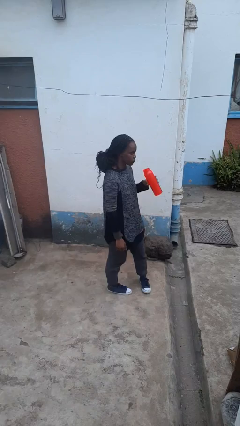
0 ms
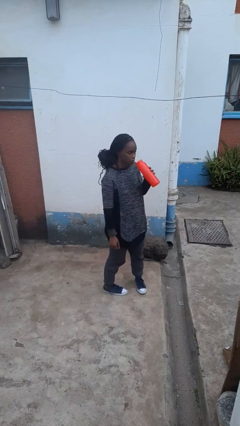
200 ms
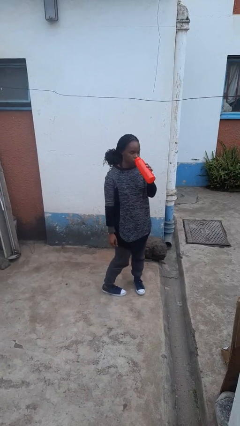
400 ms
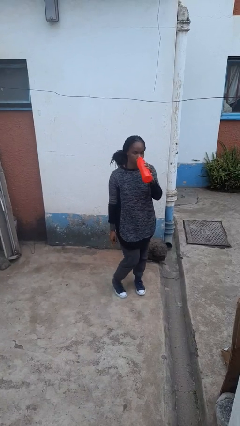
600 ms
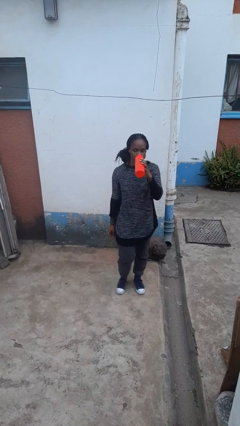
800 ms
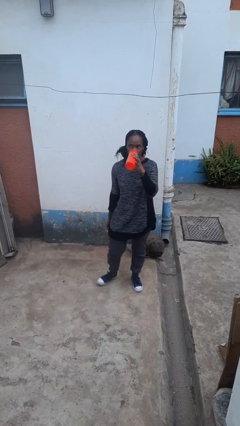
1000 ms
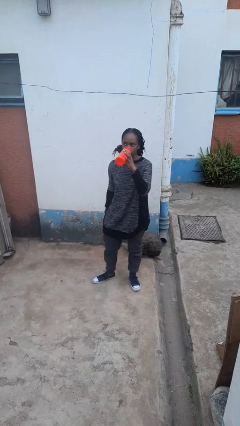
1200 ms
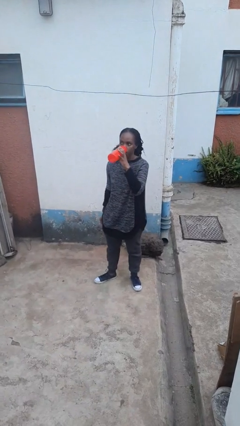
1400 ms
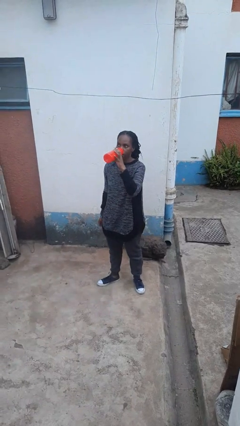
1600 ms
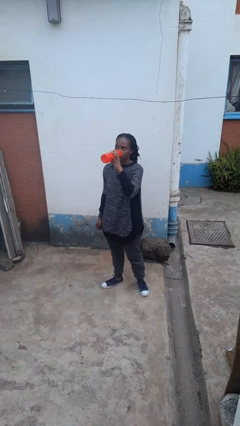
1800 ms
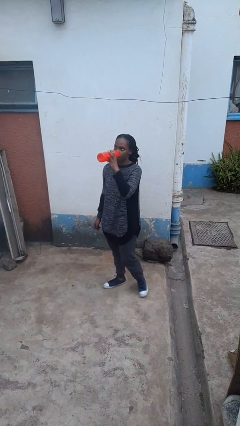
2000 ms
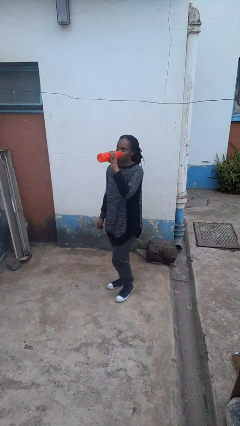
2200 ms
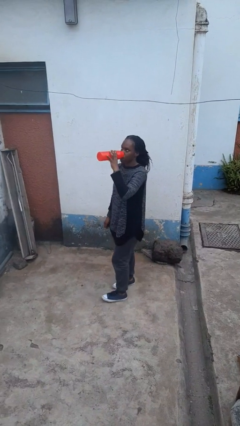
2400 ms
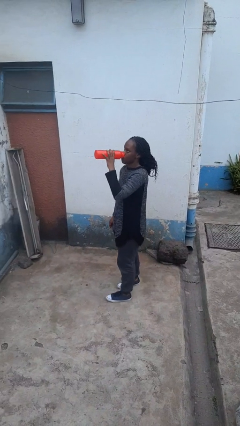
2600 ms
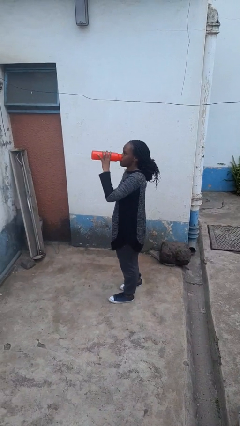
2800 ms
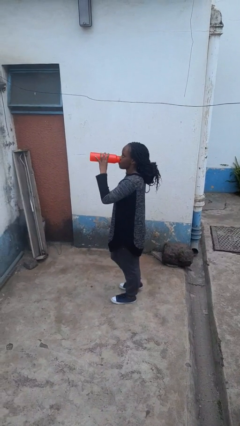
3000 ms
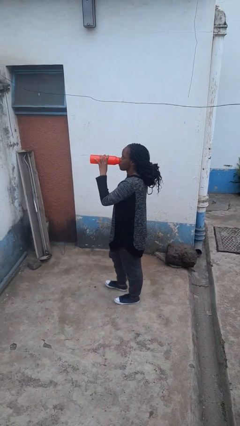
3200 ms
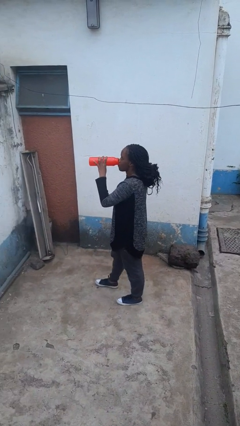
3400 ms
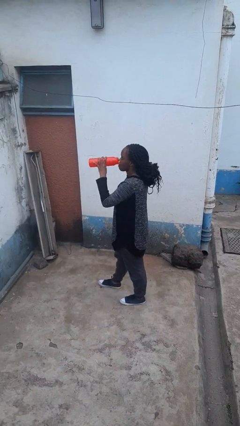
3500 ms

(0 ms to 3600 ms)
person drinks from bottle

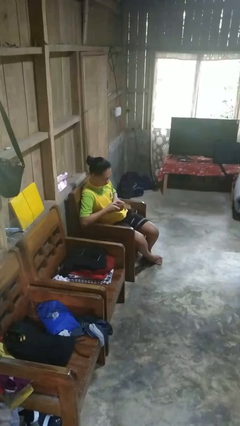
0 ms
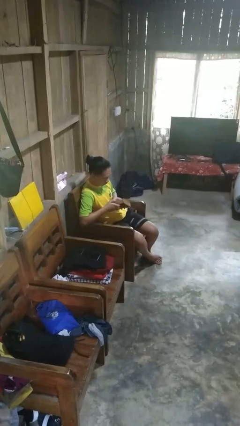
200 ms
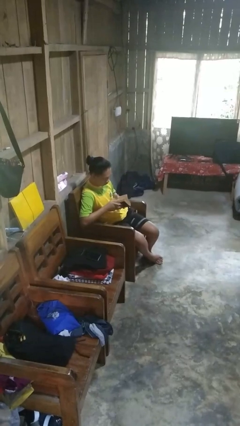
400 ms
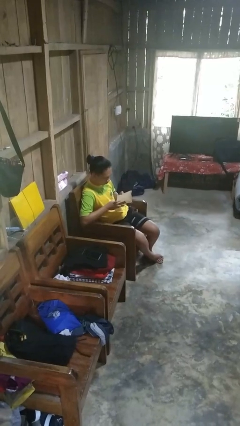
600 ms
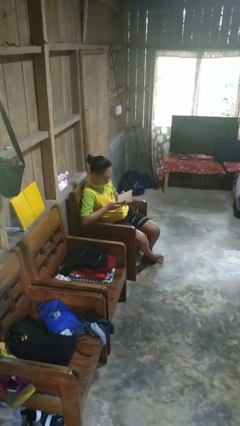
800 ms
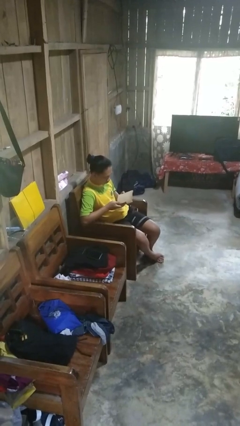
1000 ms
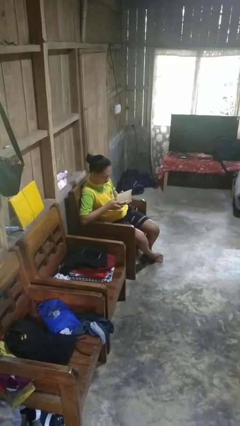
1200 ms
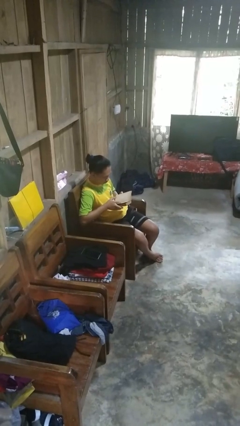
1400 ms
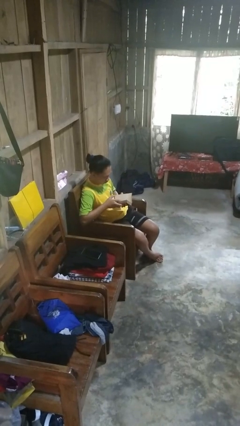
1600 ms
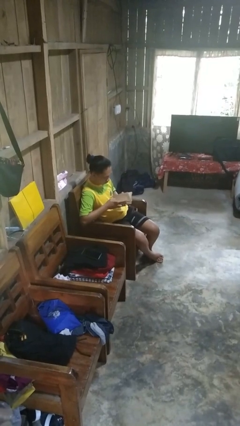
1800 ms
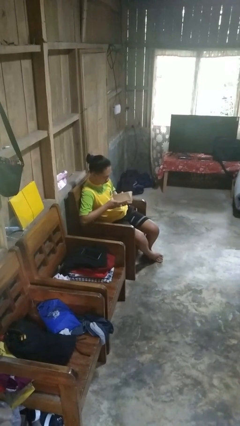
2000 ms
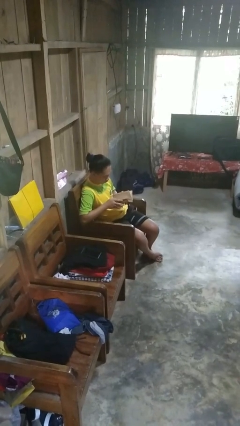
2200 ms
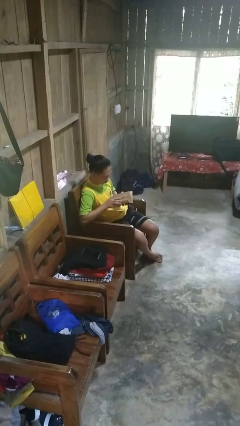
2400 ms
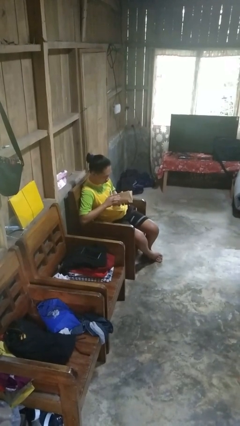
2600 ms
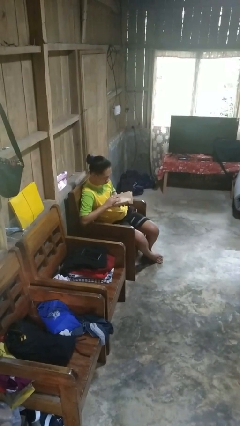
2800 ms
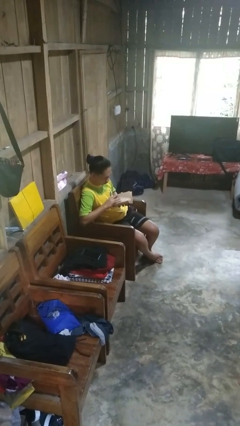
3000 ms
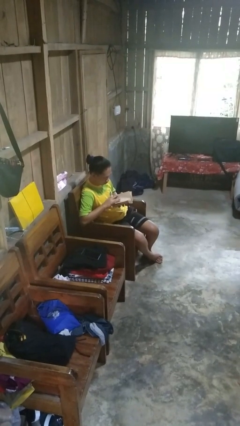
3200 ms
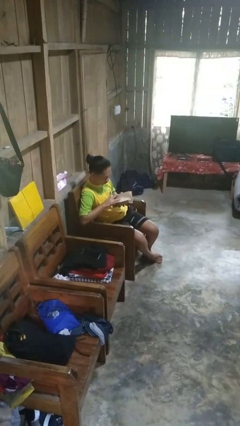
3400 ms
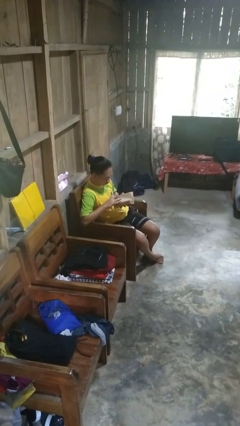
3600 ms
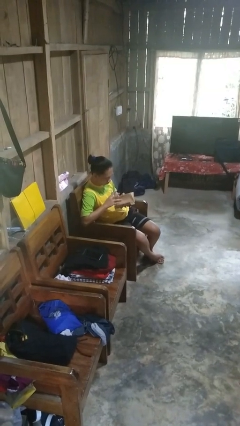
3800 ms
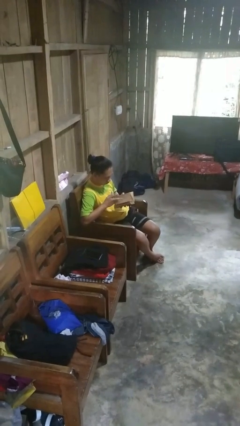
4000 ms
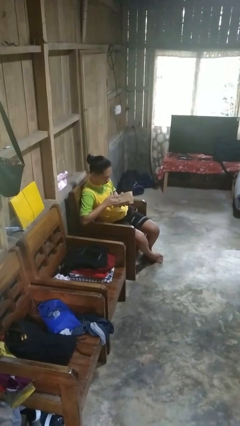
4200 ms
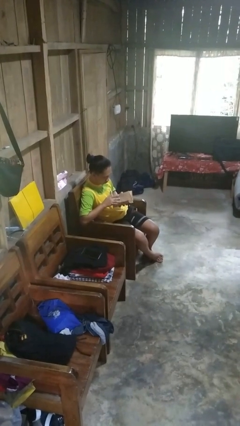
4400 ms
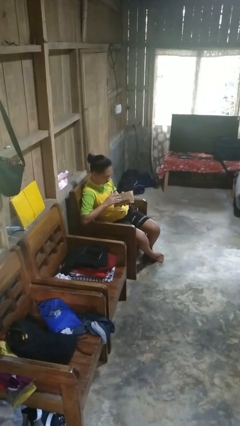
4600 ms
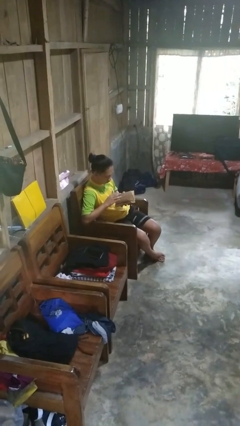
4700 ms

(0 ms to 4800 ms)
person reads book

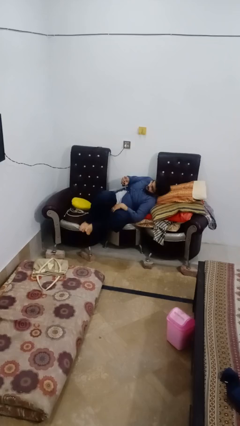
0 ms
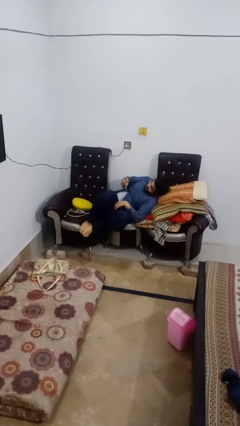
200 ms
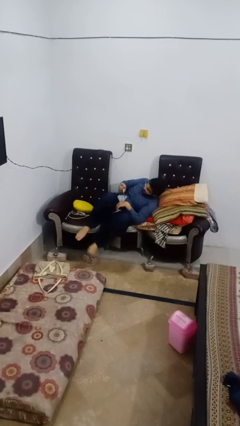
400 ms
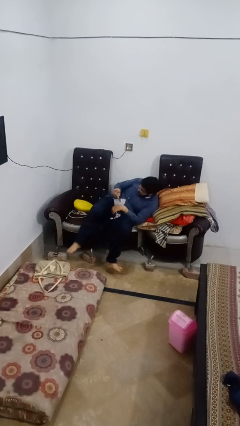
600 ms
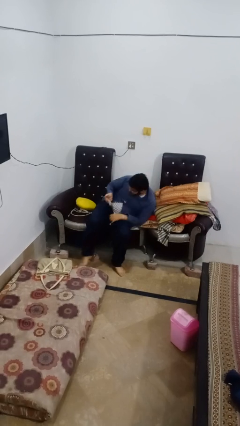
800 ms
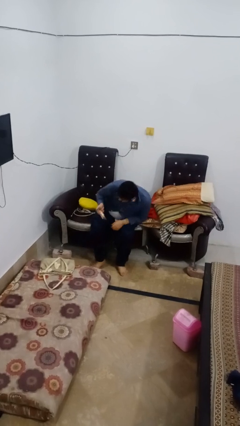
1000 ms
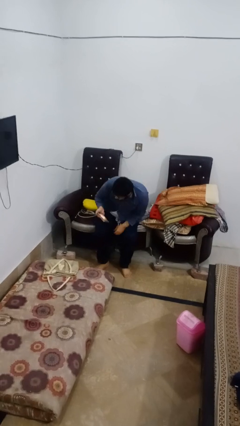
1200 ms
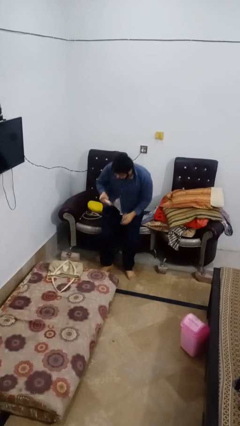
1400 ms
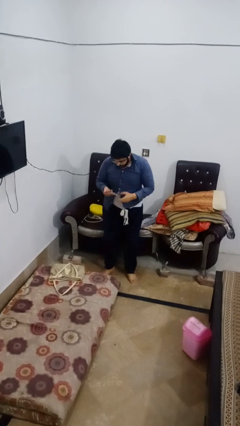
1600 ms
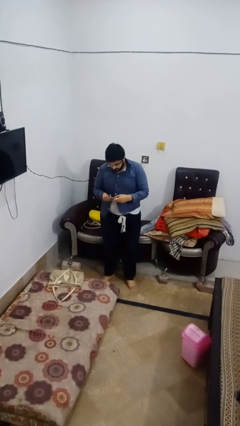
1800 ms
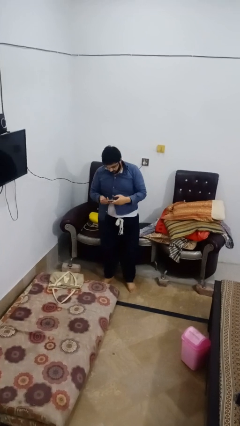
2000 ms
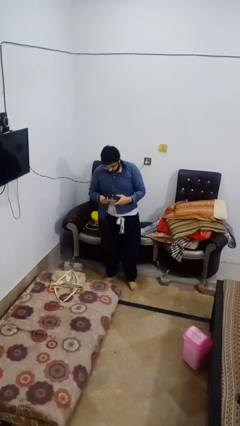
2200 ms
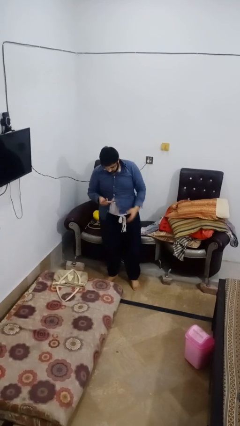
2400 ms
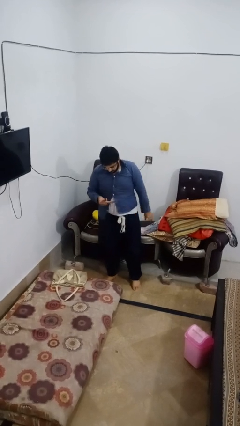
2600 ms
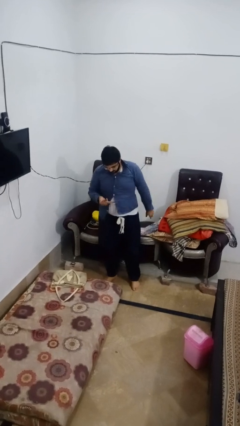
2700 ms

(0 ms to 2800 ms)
person stands up

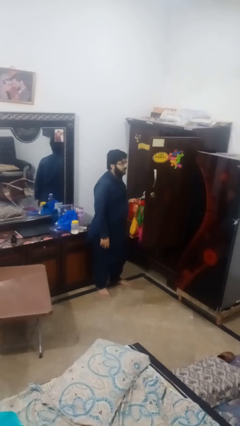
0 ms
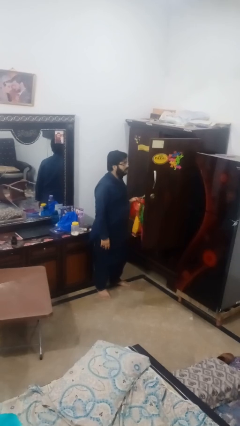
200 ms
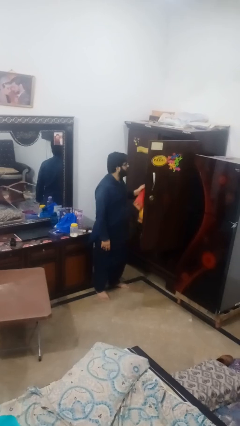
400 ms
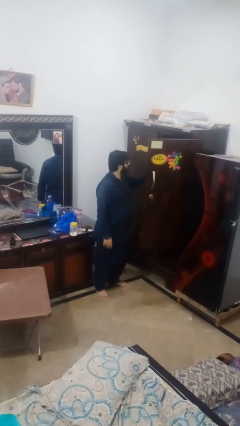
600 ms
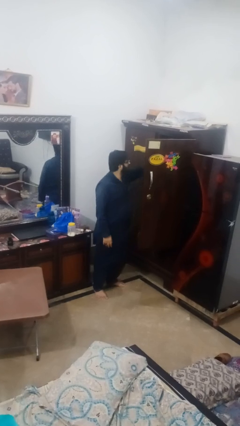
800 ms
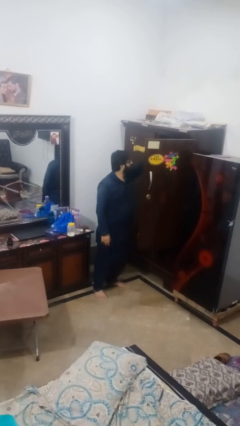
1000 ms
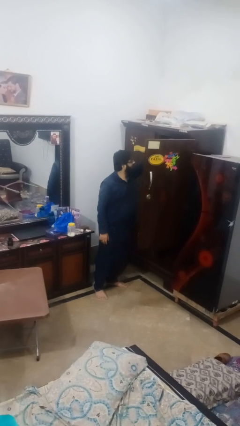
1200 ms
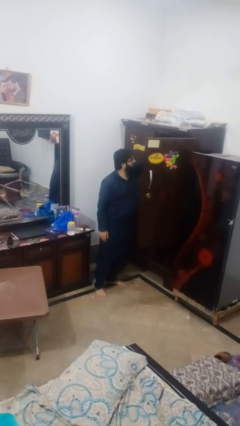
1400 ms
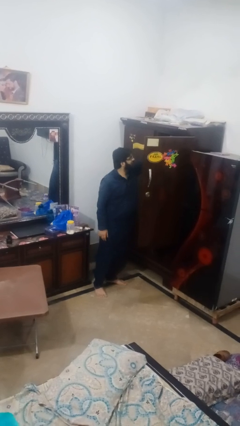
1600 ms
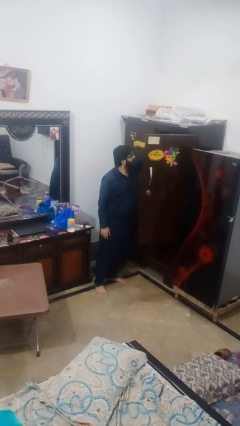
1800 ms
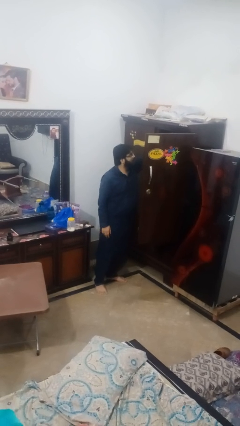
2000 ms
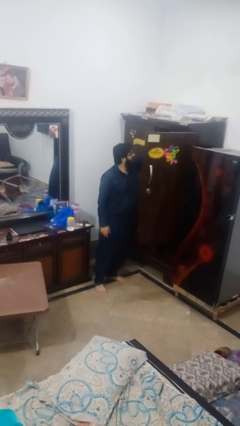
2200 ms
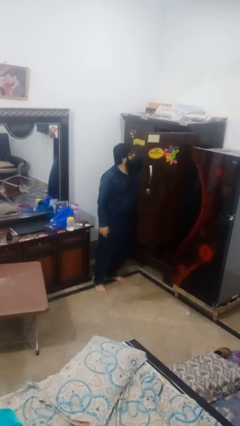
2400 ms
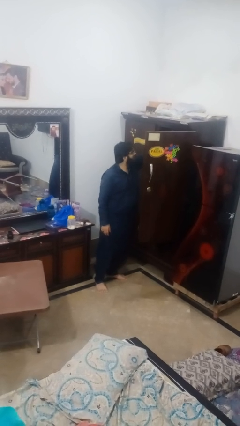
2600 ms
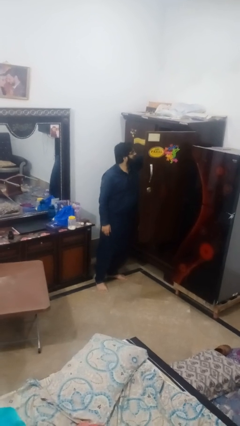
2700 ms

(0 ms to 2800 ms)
person puts clothes into closet

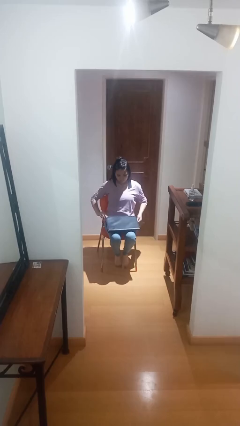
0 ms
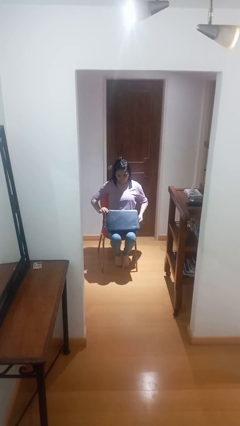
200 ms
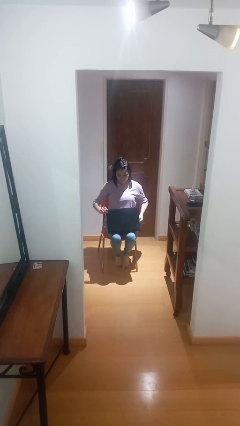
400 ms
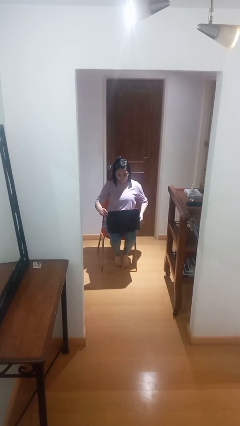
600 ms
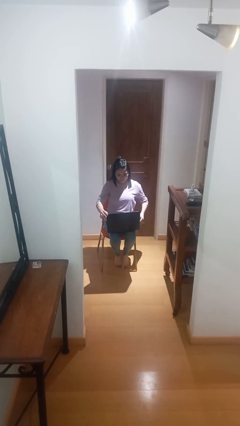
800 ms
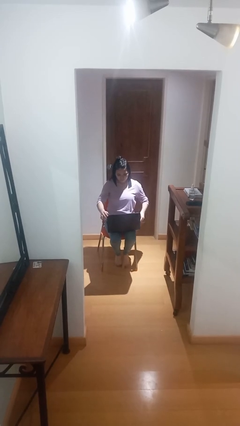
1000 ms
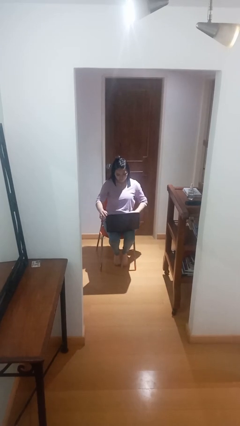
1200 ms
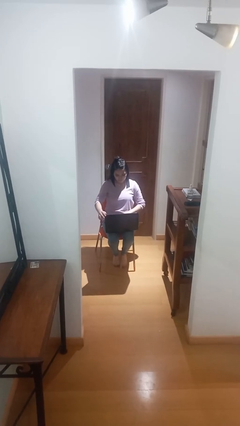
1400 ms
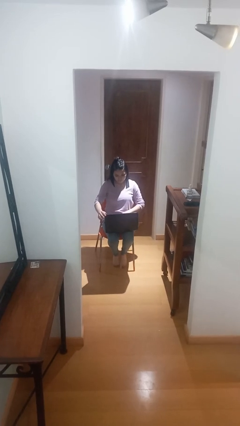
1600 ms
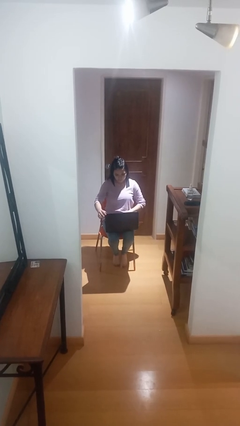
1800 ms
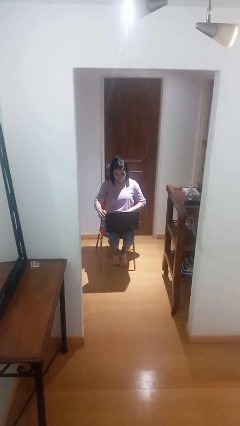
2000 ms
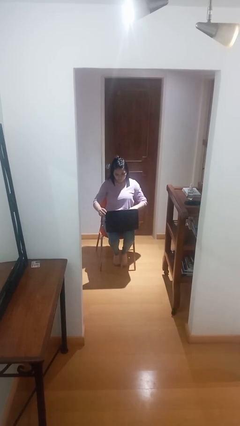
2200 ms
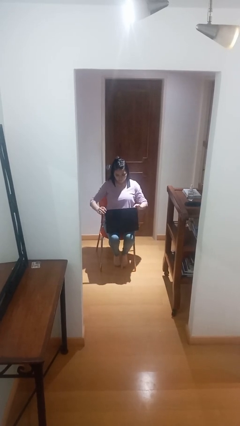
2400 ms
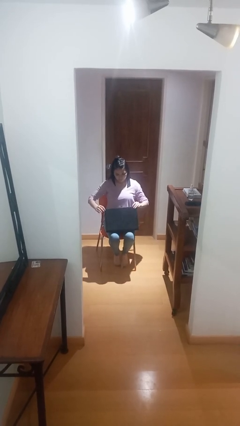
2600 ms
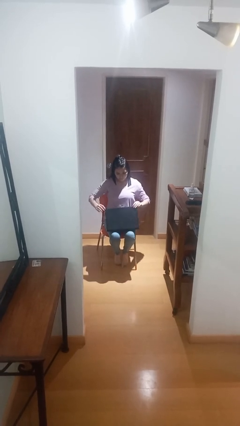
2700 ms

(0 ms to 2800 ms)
person interacts with laptop

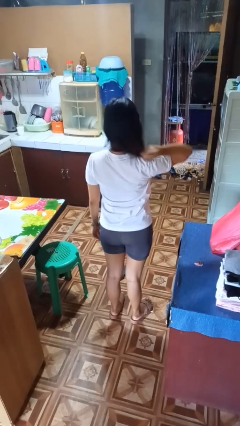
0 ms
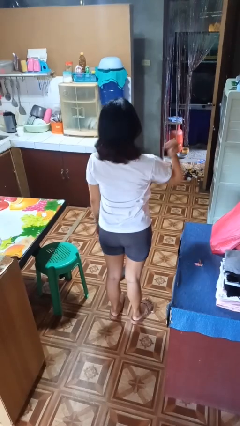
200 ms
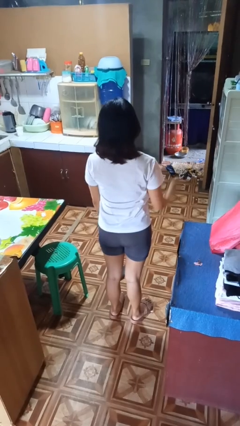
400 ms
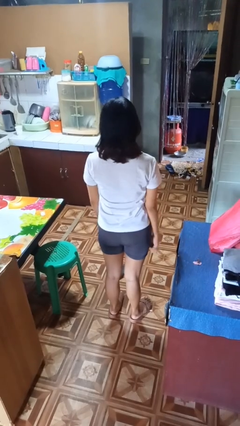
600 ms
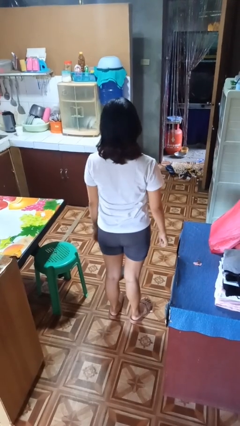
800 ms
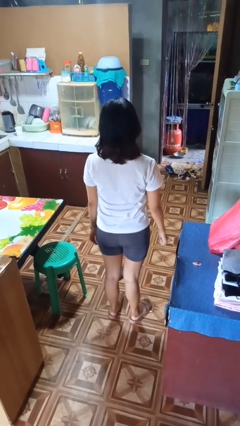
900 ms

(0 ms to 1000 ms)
person takes off hairtie
